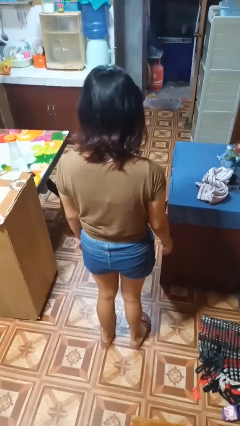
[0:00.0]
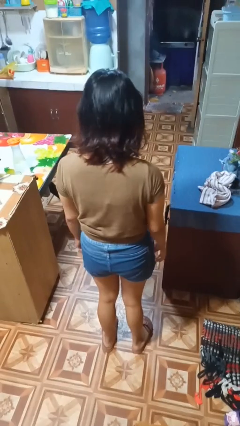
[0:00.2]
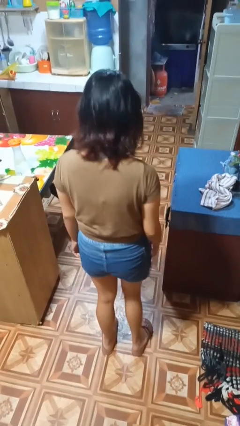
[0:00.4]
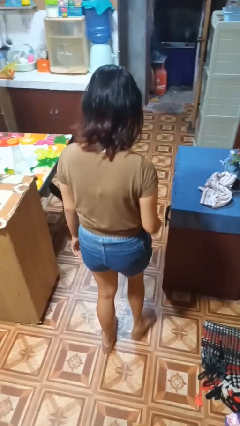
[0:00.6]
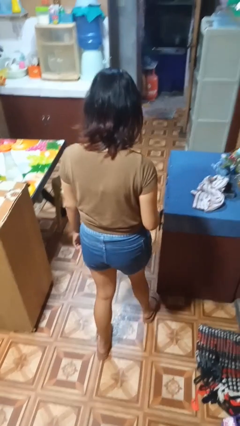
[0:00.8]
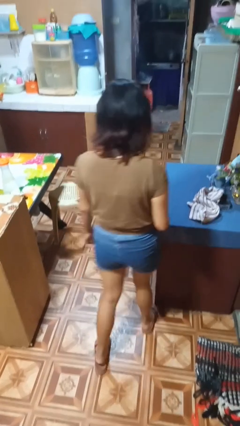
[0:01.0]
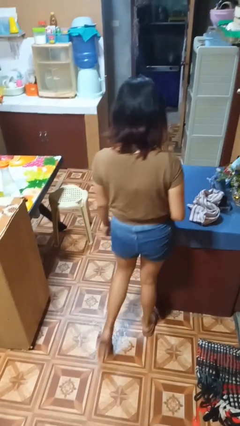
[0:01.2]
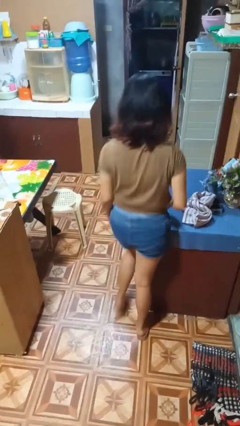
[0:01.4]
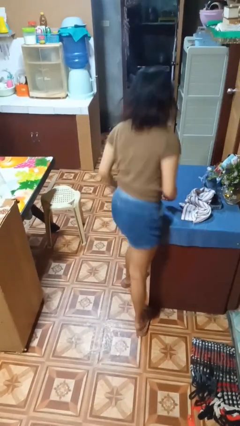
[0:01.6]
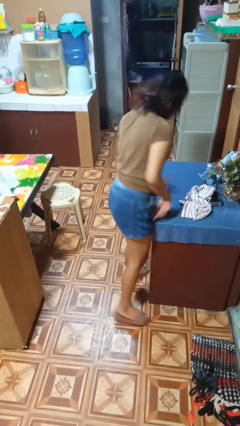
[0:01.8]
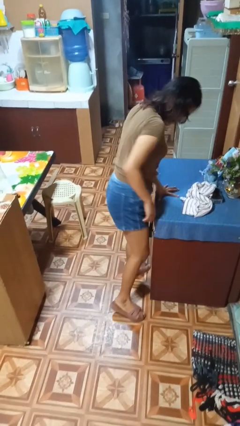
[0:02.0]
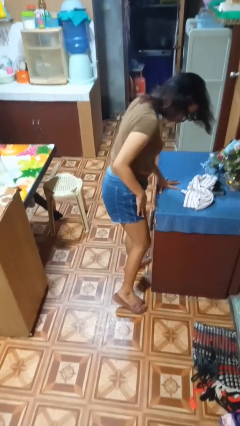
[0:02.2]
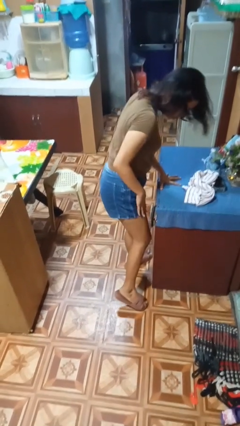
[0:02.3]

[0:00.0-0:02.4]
person bumps into table

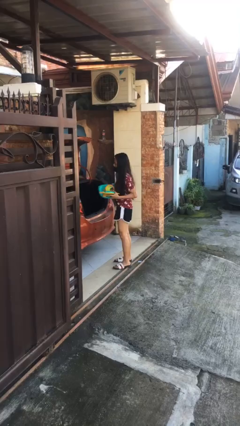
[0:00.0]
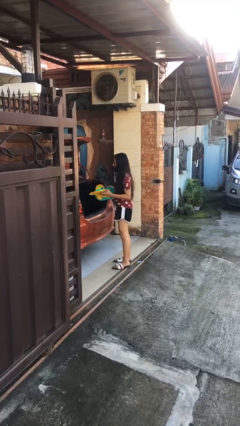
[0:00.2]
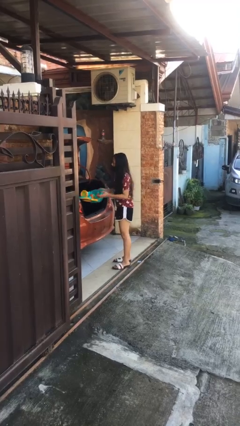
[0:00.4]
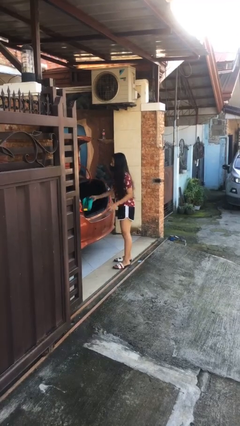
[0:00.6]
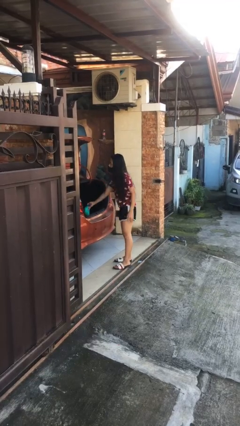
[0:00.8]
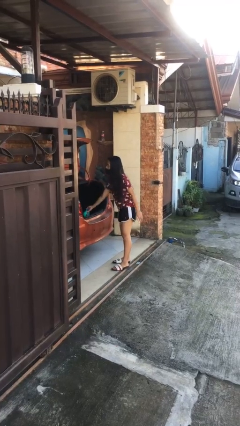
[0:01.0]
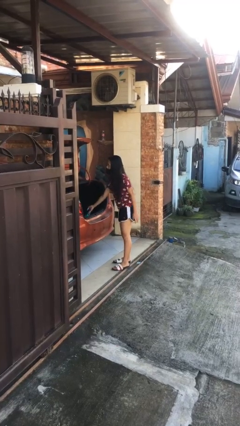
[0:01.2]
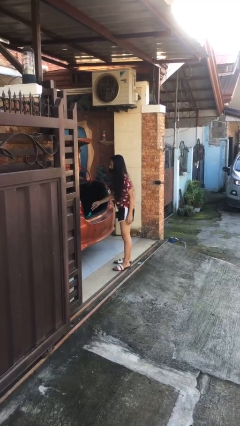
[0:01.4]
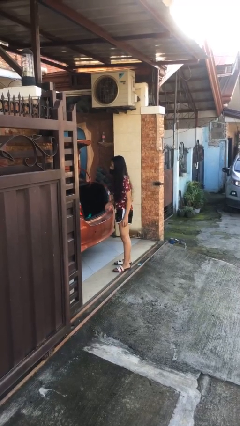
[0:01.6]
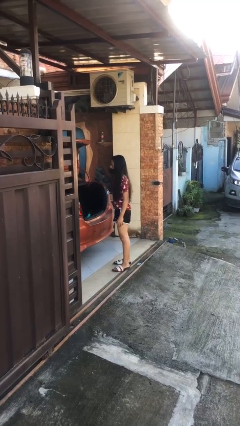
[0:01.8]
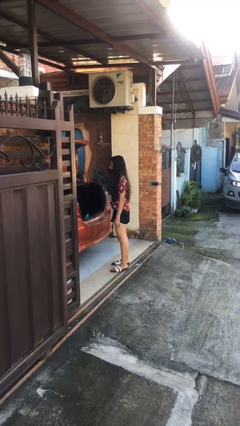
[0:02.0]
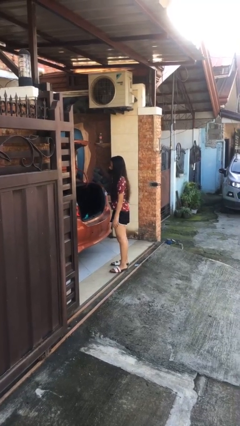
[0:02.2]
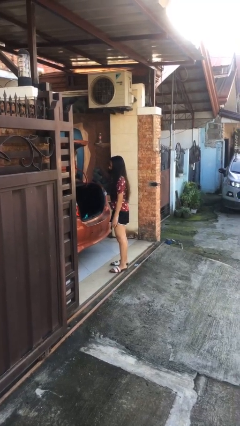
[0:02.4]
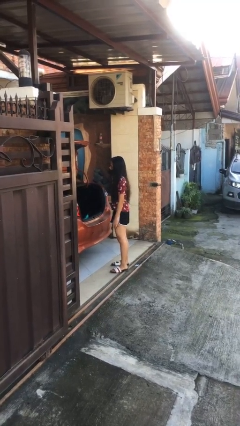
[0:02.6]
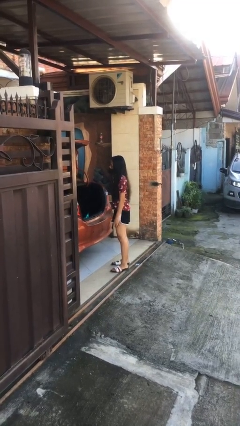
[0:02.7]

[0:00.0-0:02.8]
person loads car

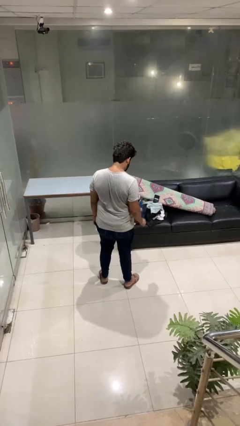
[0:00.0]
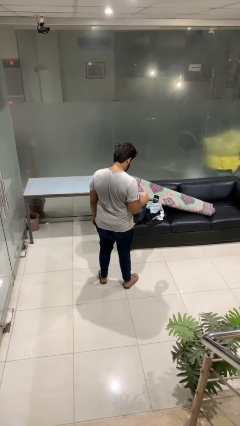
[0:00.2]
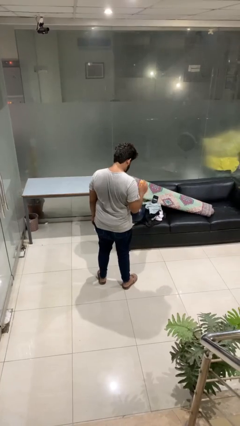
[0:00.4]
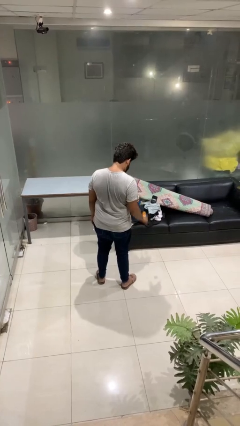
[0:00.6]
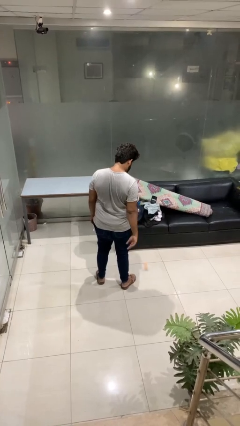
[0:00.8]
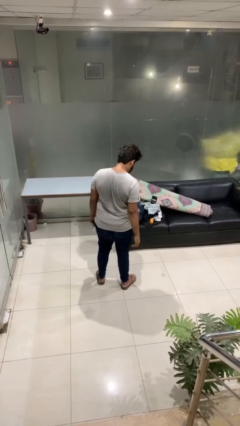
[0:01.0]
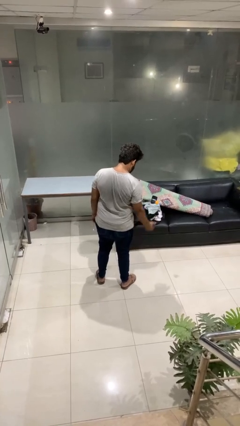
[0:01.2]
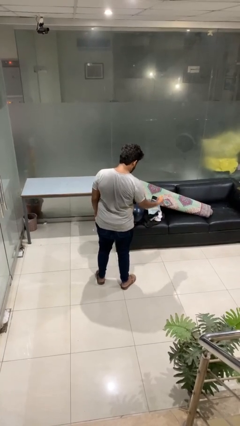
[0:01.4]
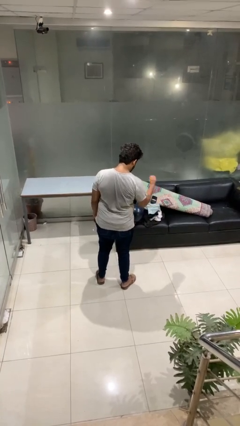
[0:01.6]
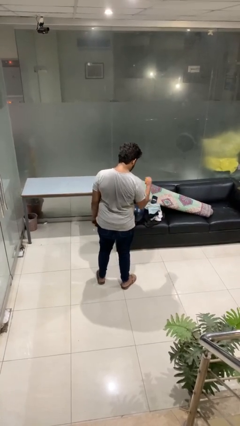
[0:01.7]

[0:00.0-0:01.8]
person bounces ball on floor

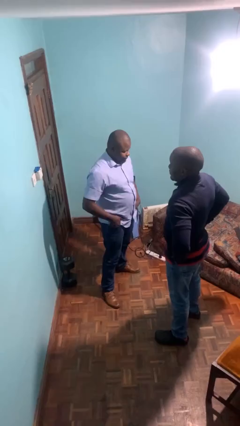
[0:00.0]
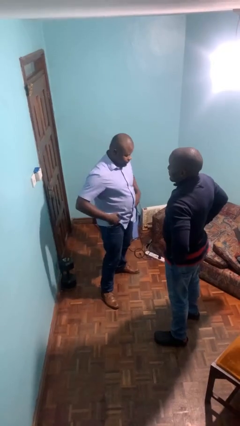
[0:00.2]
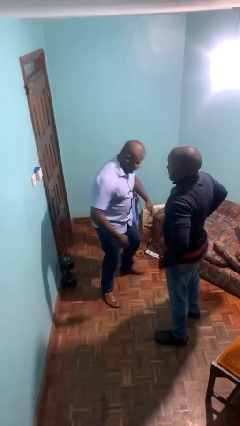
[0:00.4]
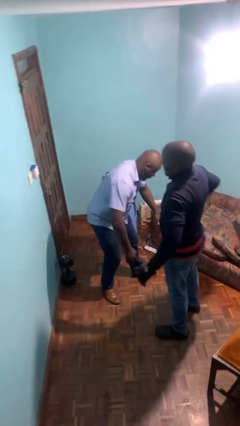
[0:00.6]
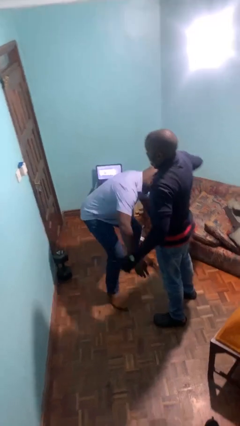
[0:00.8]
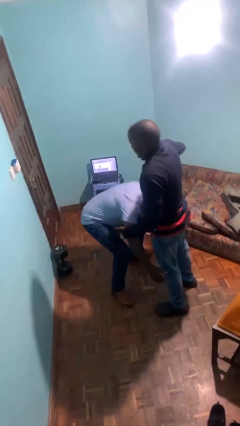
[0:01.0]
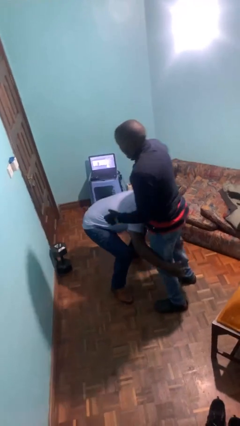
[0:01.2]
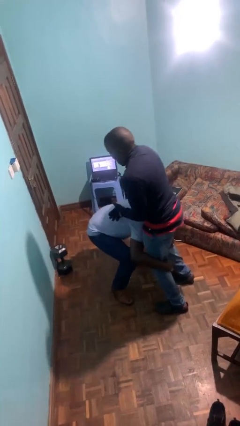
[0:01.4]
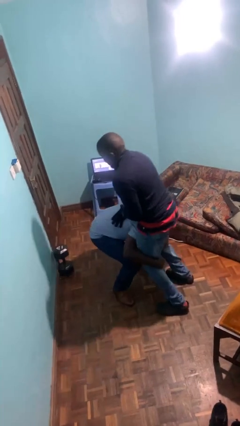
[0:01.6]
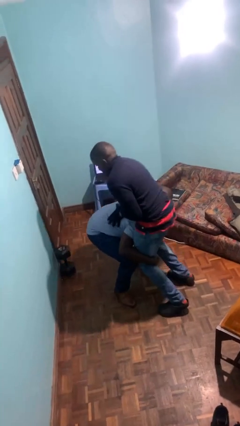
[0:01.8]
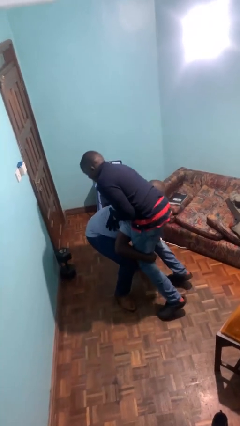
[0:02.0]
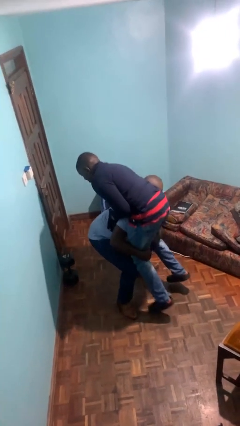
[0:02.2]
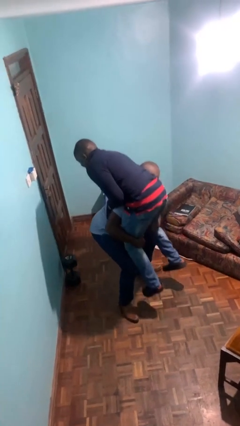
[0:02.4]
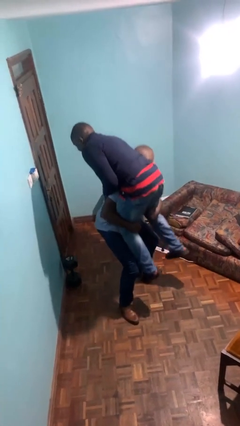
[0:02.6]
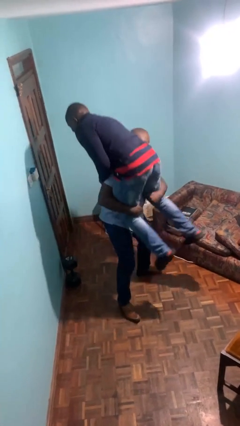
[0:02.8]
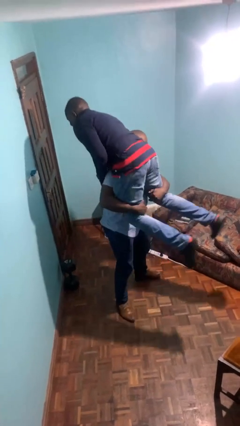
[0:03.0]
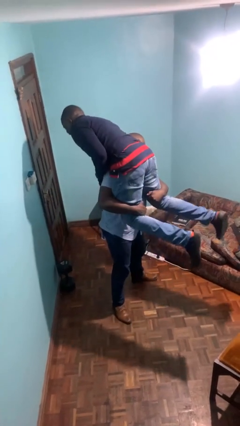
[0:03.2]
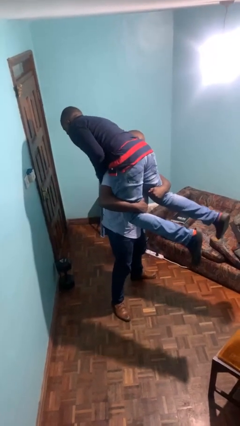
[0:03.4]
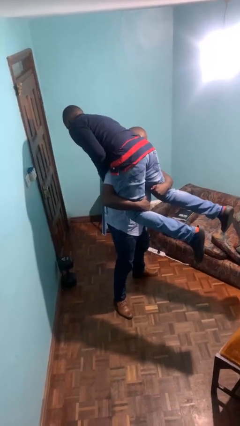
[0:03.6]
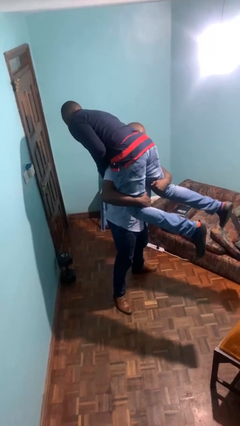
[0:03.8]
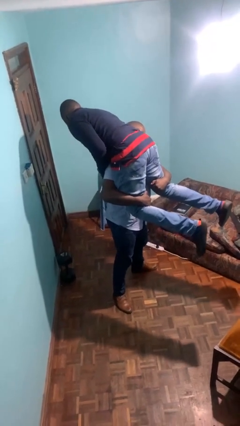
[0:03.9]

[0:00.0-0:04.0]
person carries person over shoulder

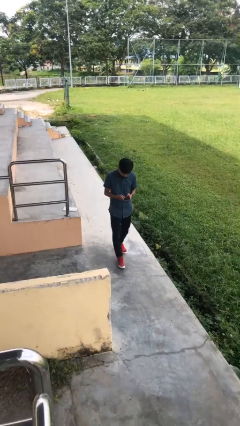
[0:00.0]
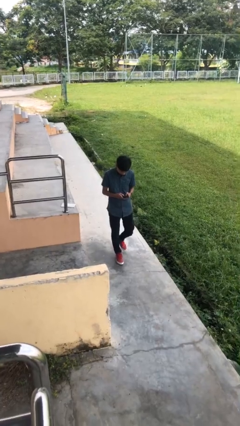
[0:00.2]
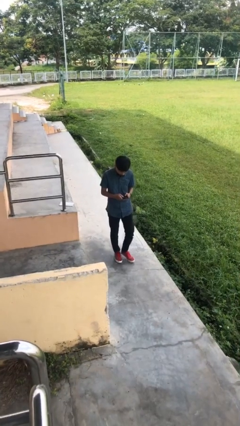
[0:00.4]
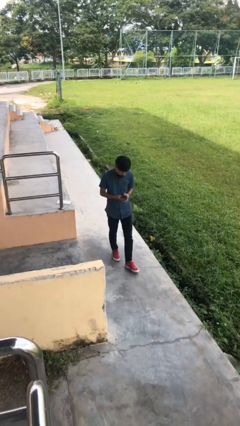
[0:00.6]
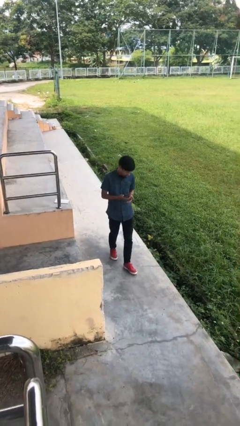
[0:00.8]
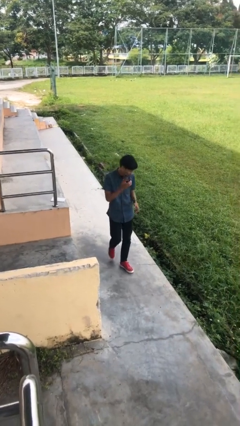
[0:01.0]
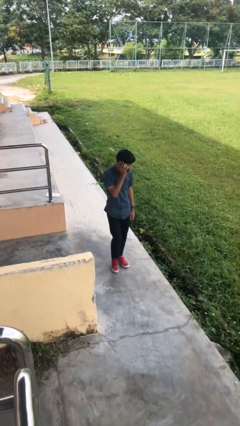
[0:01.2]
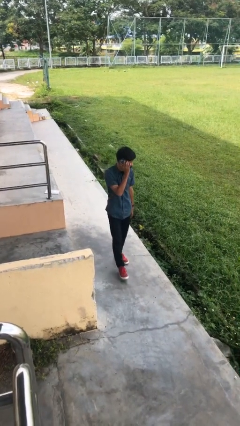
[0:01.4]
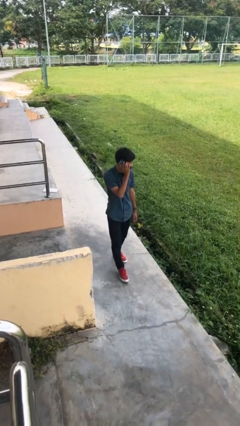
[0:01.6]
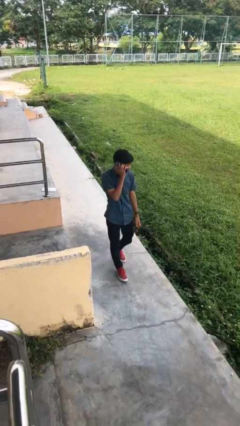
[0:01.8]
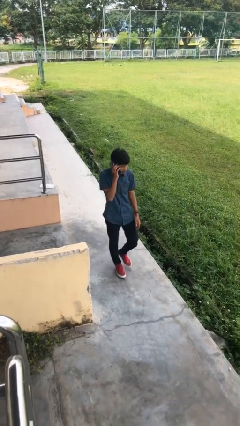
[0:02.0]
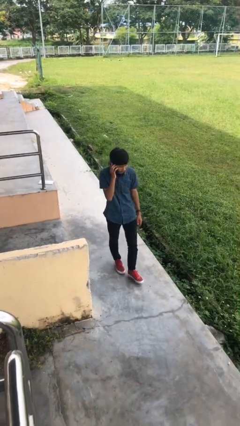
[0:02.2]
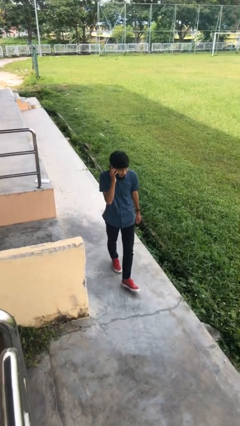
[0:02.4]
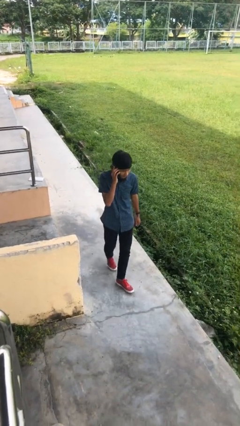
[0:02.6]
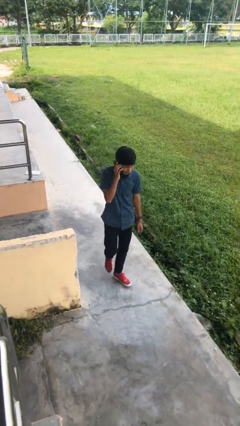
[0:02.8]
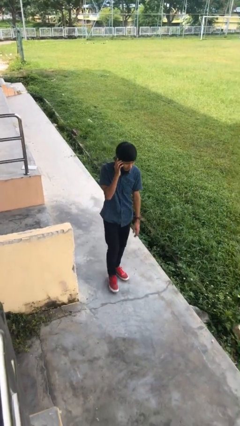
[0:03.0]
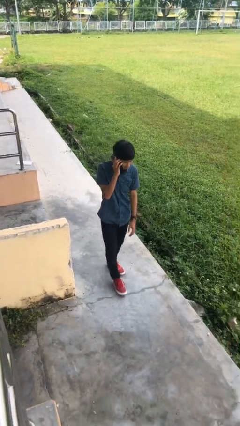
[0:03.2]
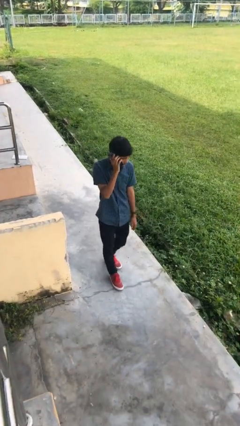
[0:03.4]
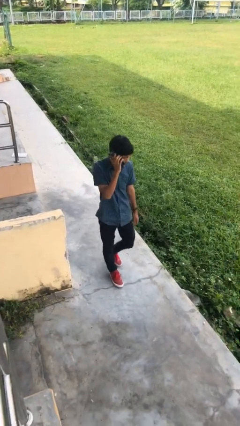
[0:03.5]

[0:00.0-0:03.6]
person talks on phone

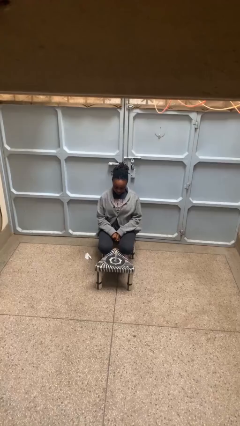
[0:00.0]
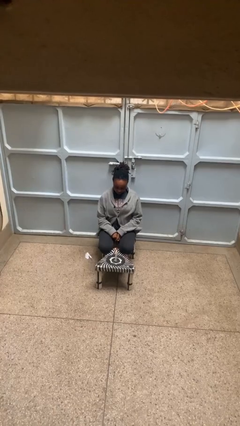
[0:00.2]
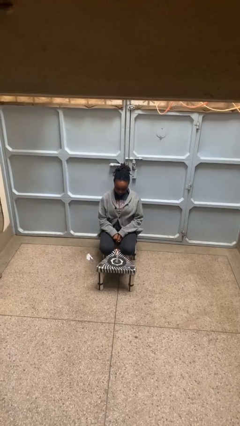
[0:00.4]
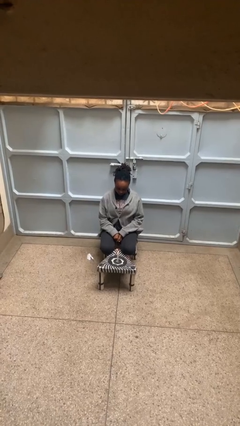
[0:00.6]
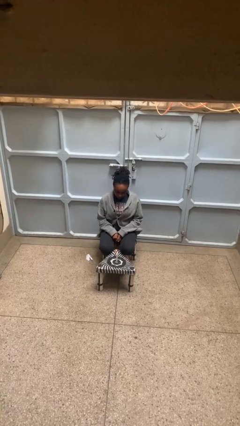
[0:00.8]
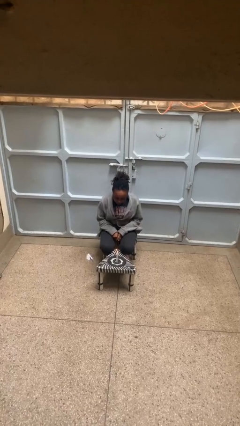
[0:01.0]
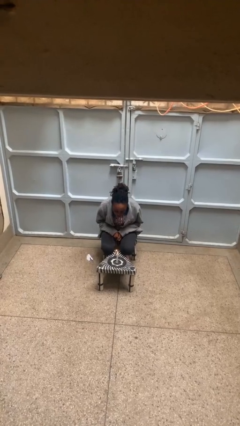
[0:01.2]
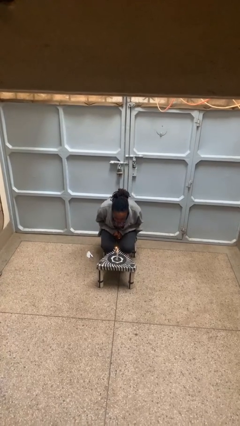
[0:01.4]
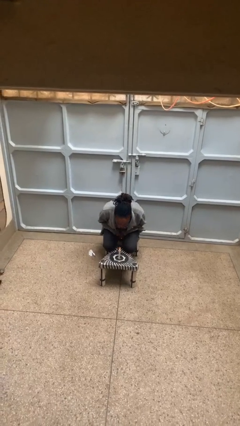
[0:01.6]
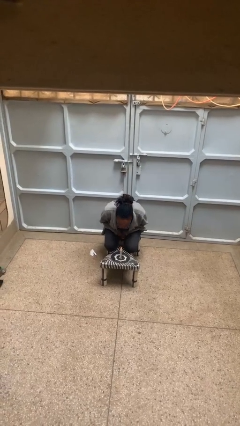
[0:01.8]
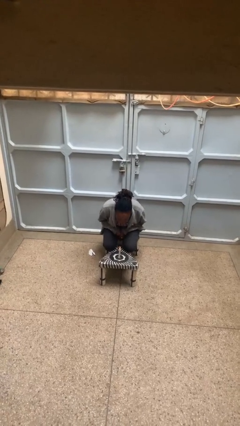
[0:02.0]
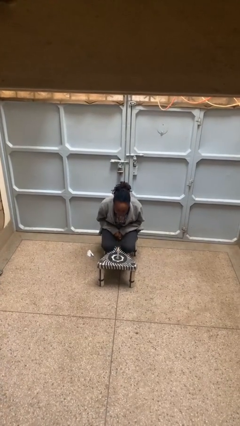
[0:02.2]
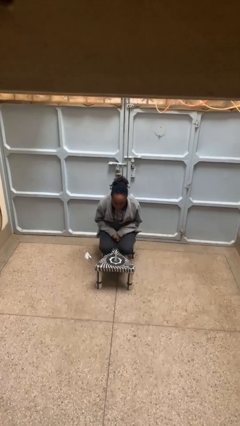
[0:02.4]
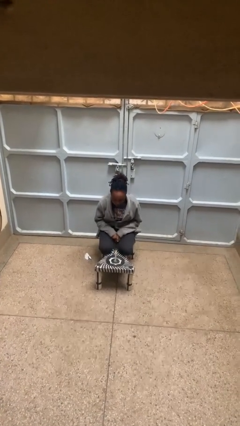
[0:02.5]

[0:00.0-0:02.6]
person extinguishes candle

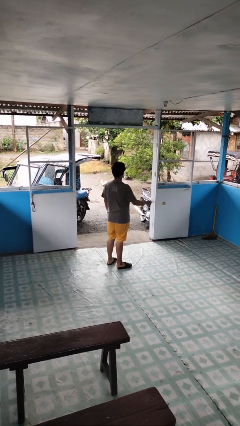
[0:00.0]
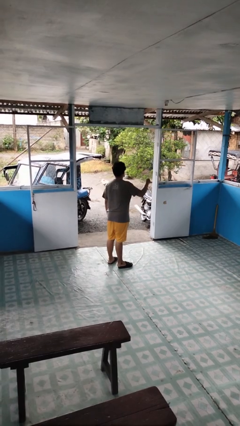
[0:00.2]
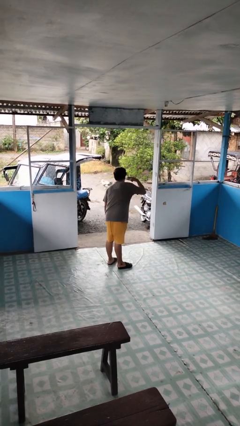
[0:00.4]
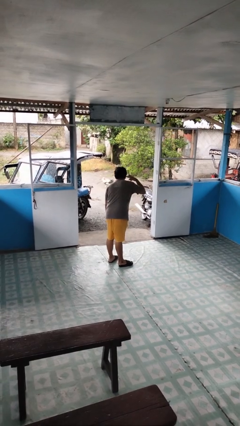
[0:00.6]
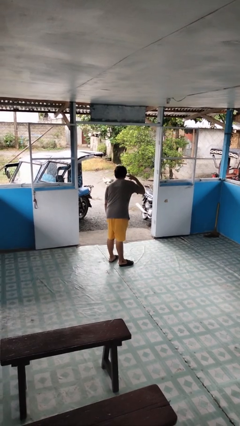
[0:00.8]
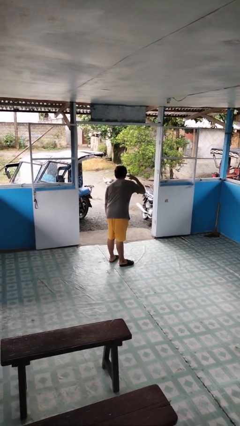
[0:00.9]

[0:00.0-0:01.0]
person gestures listen closely
